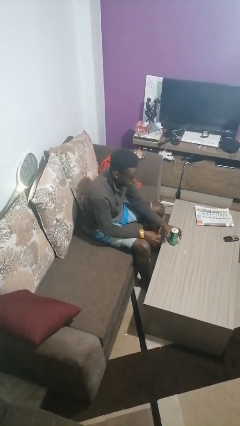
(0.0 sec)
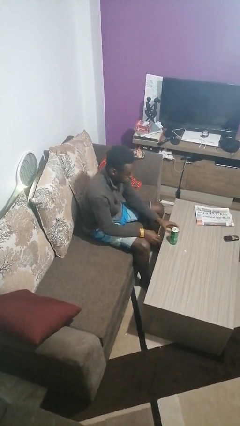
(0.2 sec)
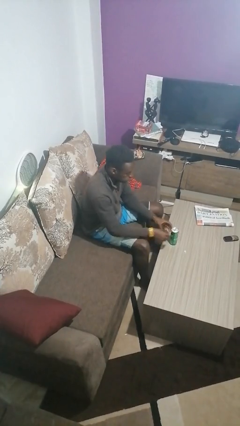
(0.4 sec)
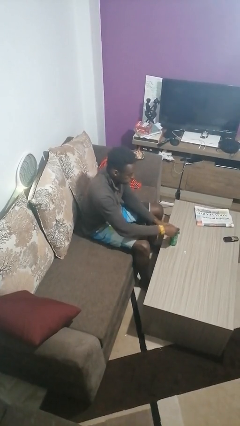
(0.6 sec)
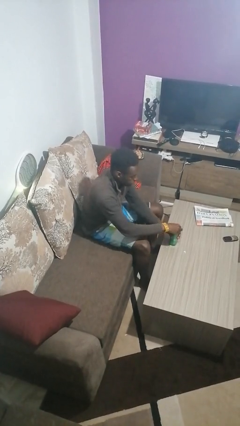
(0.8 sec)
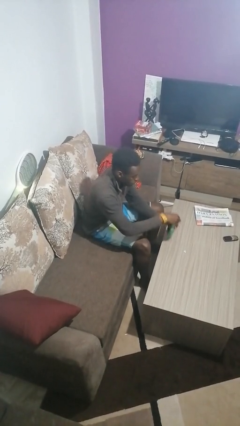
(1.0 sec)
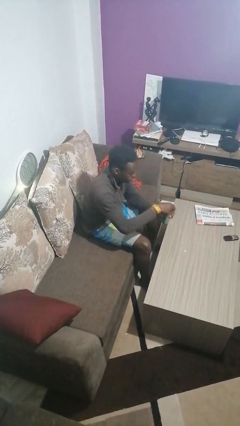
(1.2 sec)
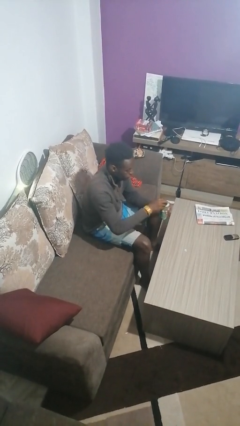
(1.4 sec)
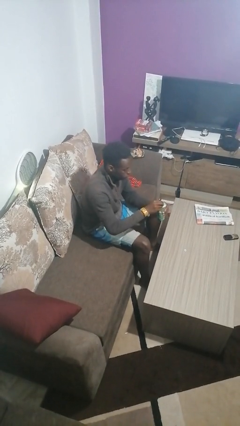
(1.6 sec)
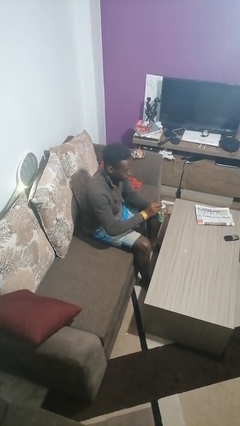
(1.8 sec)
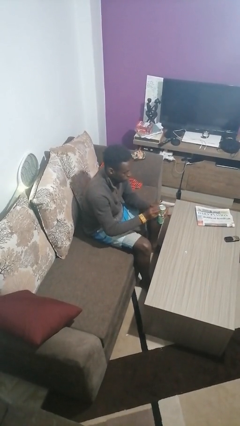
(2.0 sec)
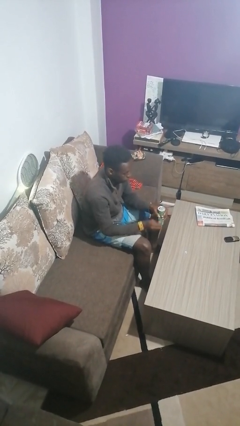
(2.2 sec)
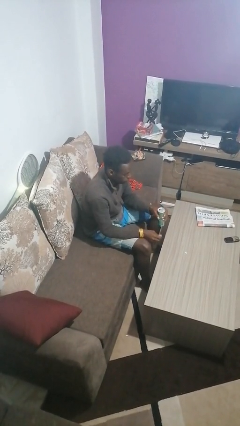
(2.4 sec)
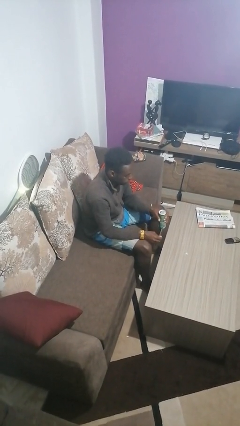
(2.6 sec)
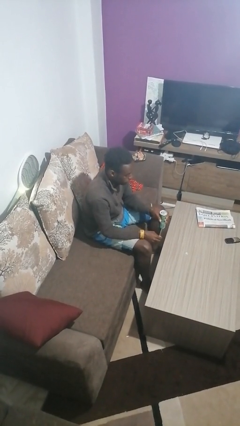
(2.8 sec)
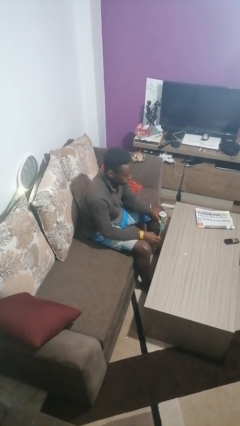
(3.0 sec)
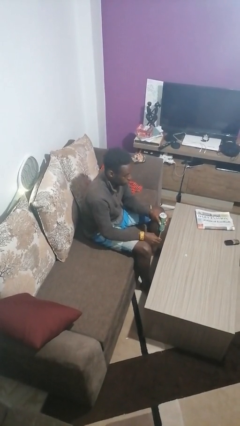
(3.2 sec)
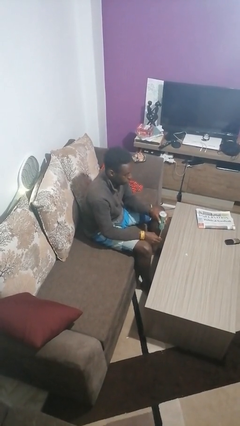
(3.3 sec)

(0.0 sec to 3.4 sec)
person opens beverage can

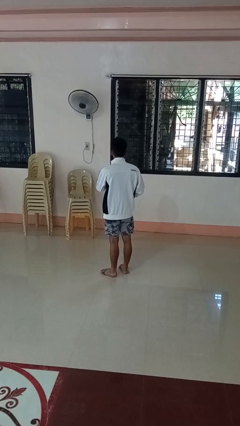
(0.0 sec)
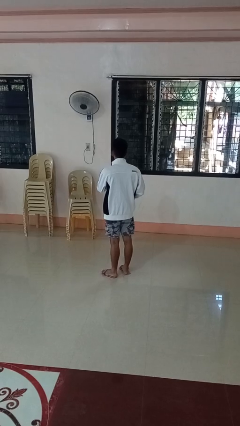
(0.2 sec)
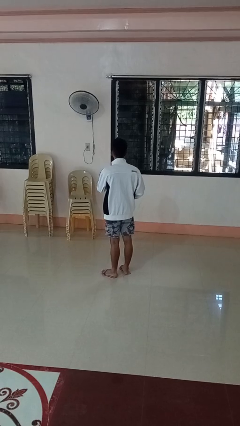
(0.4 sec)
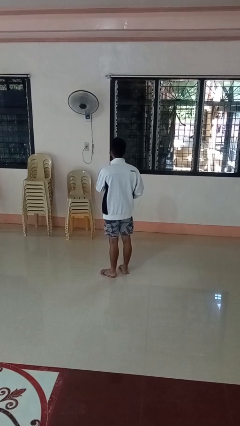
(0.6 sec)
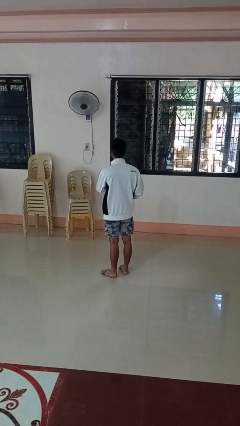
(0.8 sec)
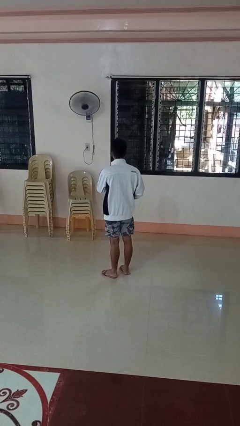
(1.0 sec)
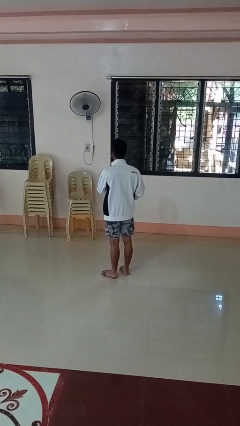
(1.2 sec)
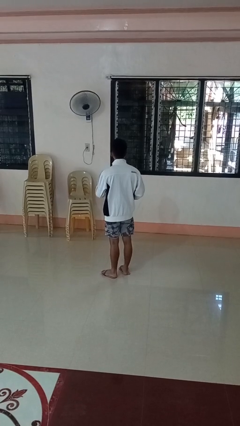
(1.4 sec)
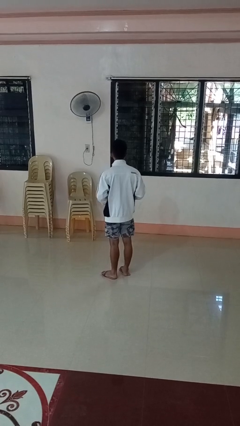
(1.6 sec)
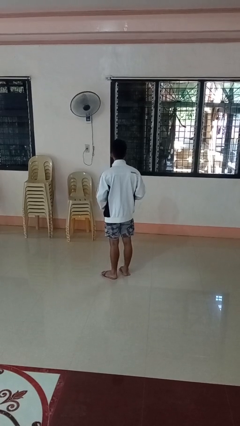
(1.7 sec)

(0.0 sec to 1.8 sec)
person zips up jacket

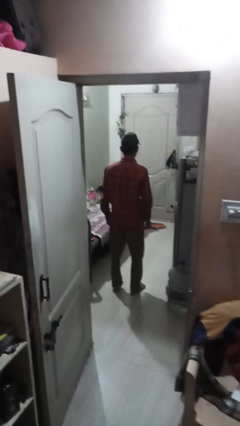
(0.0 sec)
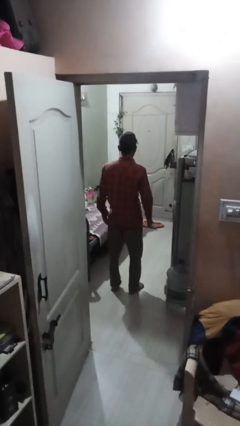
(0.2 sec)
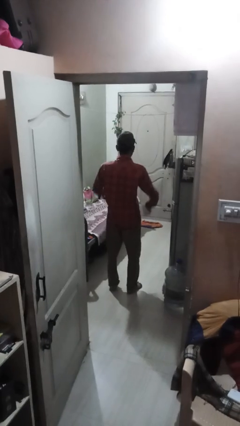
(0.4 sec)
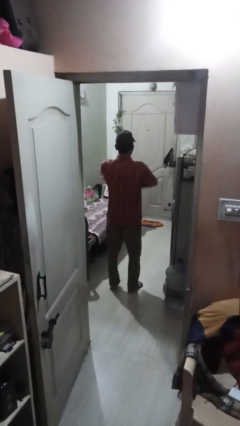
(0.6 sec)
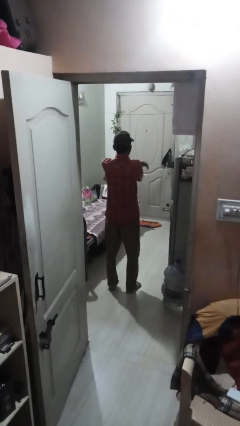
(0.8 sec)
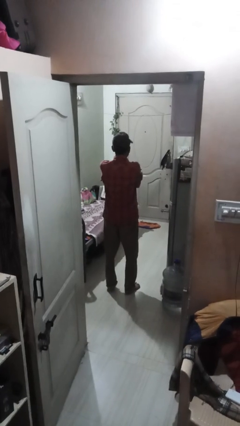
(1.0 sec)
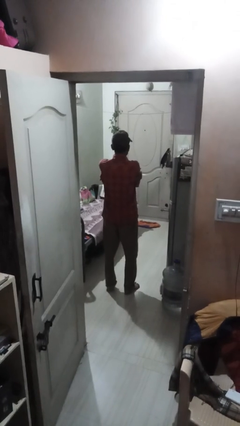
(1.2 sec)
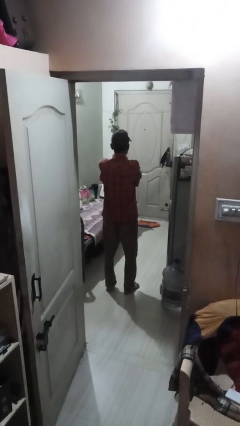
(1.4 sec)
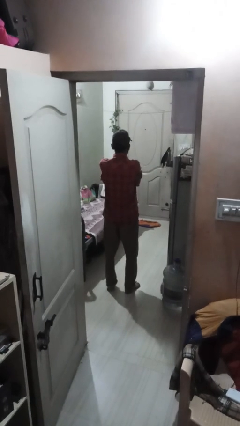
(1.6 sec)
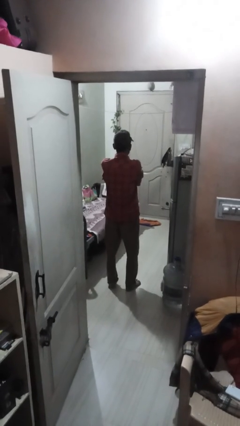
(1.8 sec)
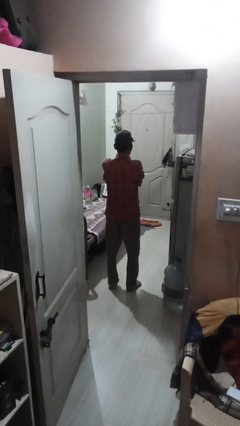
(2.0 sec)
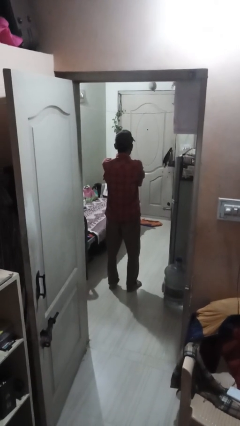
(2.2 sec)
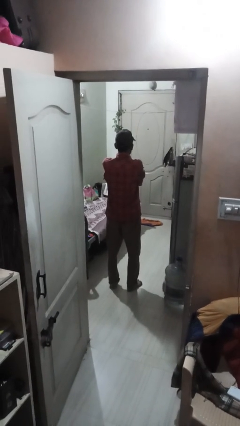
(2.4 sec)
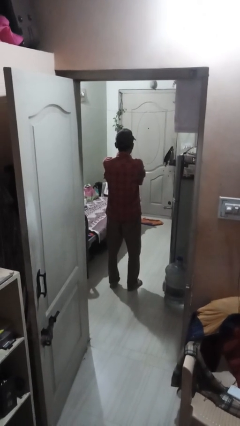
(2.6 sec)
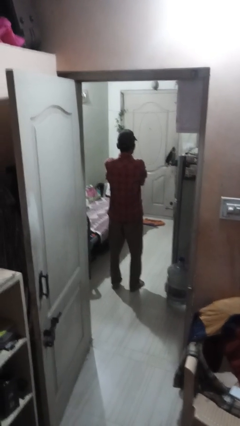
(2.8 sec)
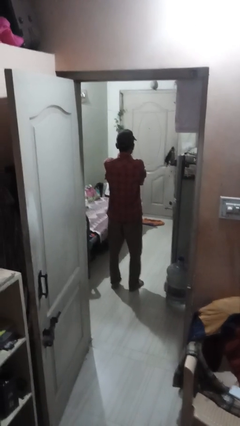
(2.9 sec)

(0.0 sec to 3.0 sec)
person crosses arms

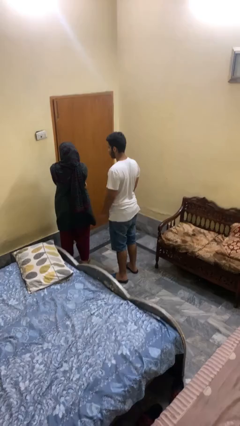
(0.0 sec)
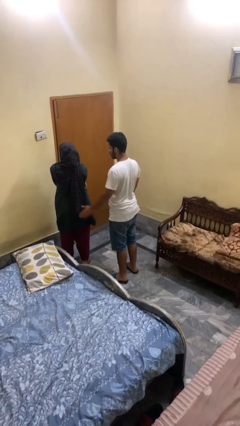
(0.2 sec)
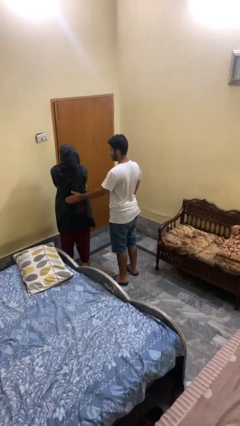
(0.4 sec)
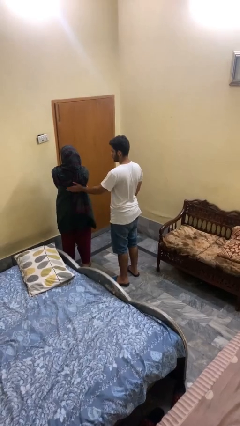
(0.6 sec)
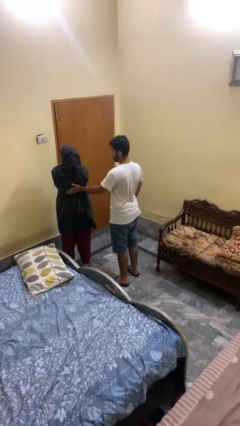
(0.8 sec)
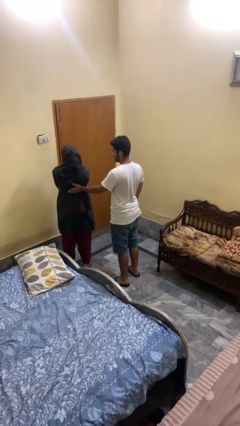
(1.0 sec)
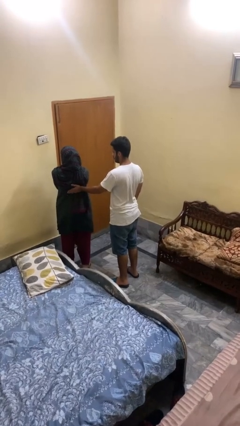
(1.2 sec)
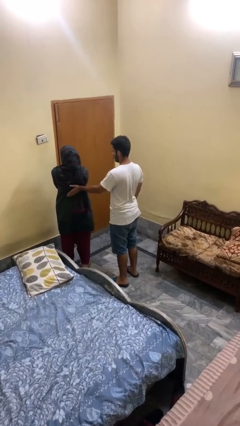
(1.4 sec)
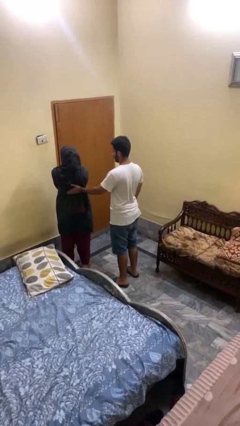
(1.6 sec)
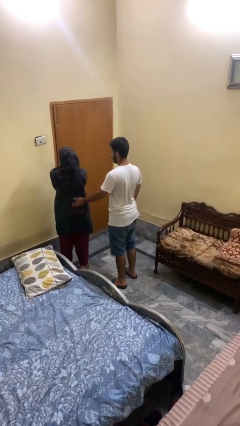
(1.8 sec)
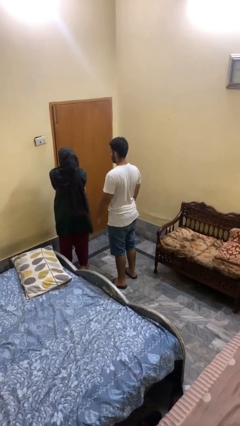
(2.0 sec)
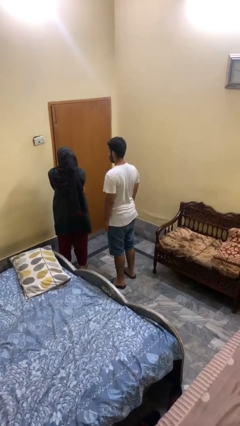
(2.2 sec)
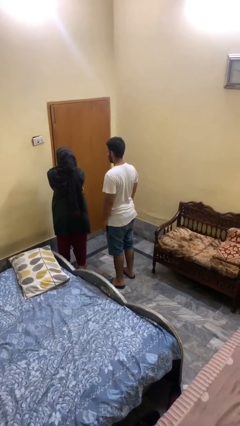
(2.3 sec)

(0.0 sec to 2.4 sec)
person touches back of person

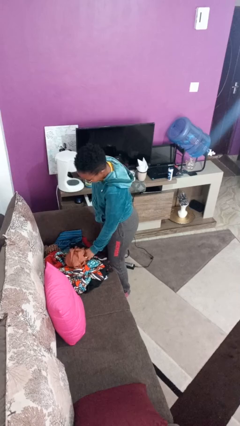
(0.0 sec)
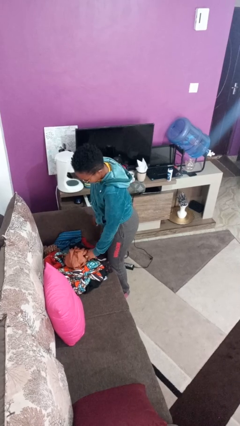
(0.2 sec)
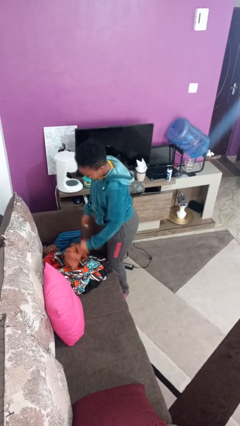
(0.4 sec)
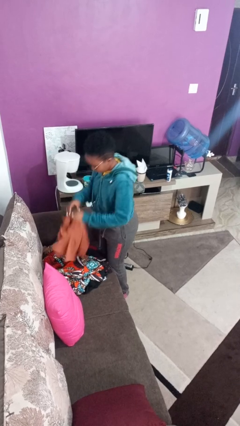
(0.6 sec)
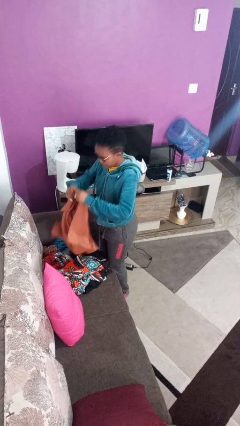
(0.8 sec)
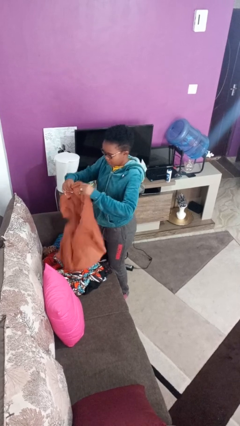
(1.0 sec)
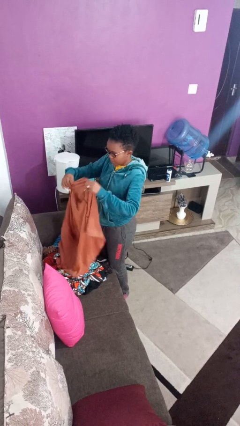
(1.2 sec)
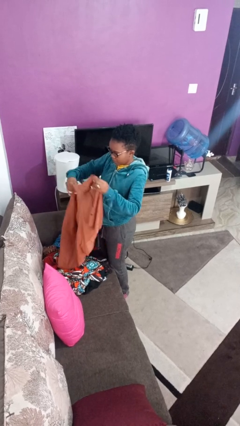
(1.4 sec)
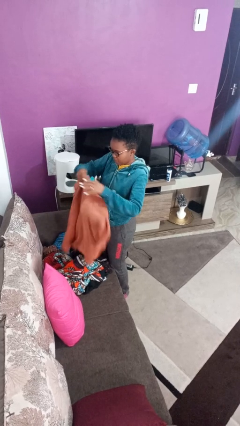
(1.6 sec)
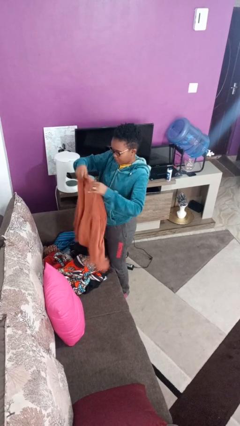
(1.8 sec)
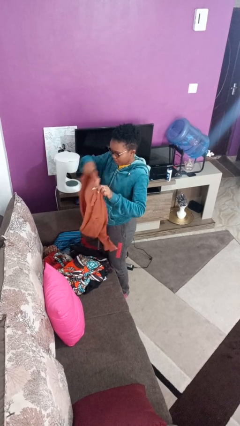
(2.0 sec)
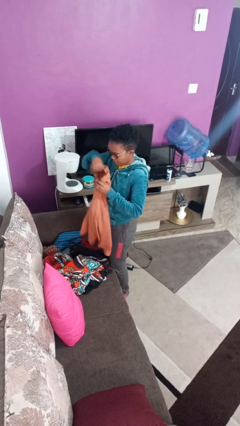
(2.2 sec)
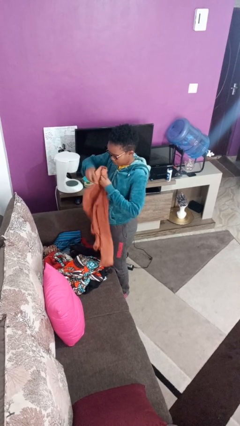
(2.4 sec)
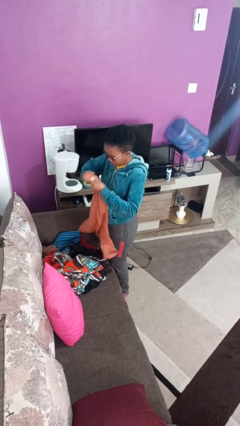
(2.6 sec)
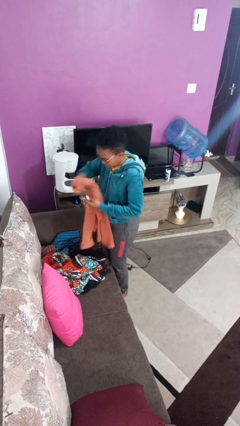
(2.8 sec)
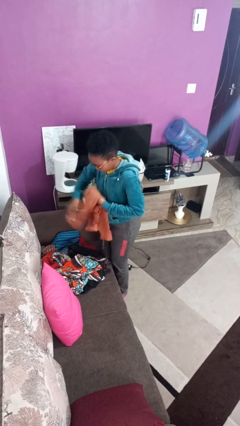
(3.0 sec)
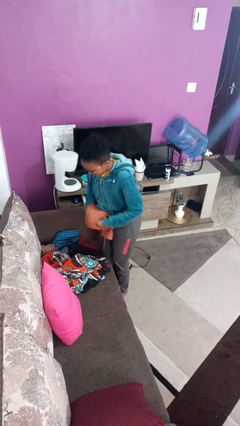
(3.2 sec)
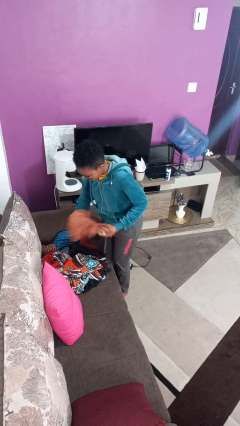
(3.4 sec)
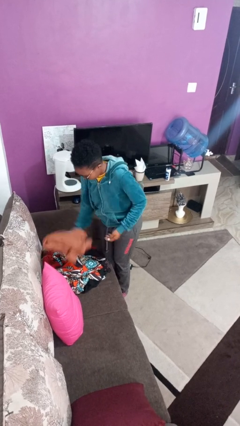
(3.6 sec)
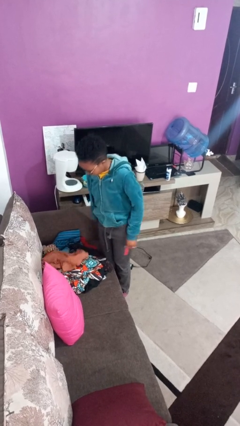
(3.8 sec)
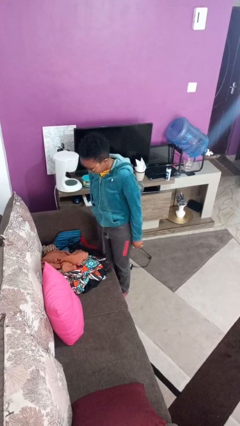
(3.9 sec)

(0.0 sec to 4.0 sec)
person folds shirt

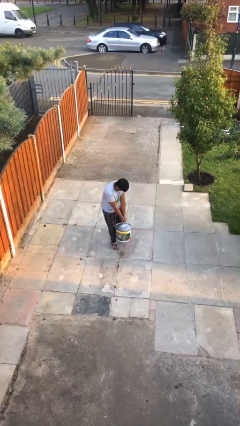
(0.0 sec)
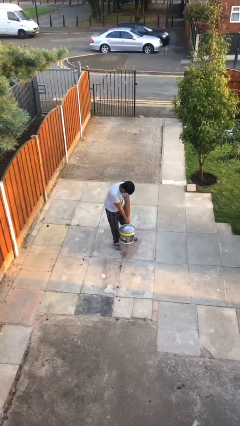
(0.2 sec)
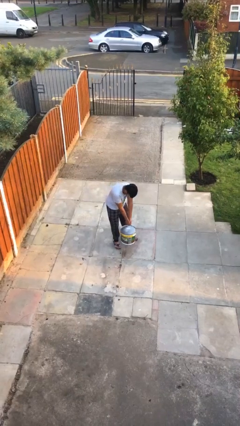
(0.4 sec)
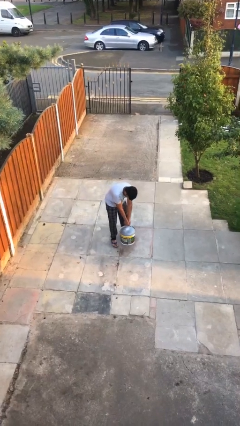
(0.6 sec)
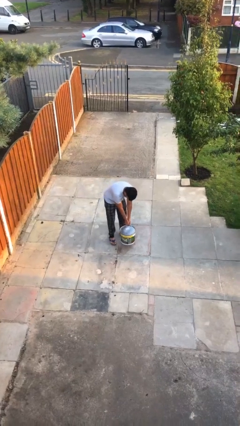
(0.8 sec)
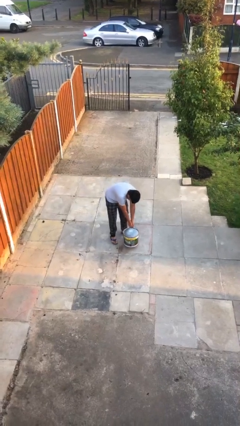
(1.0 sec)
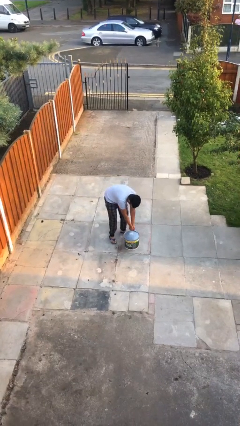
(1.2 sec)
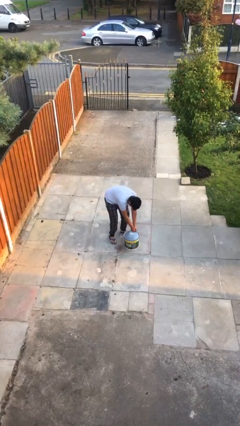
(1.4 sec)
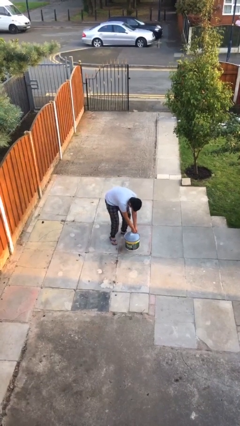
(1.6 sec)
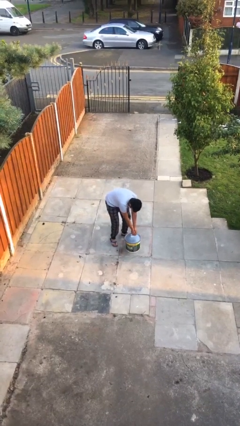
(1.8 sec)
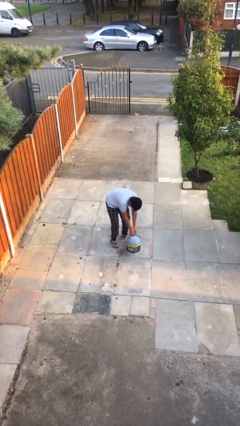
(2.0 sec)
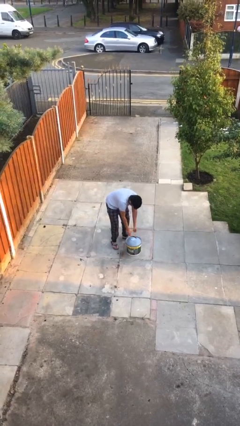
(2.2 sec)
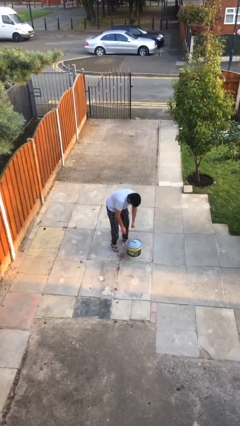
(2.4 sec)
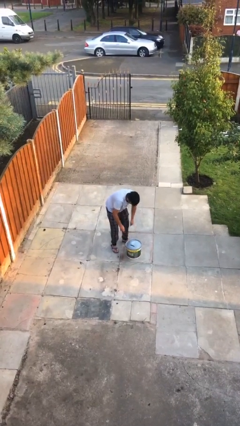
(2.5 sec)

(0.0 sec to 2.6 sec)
person puts down object on floor
